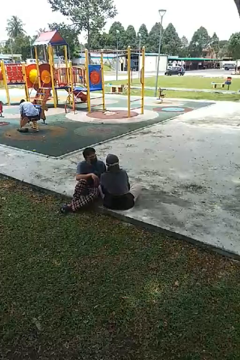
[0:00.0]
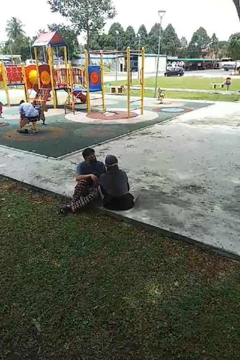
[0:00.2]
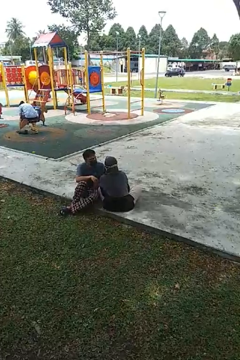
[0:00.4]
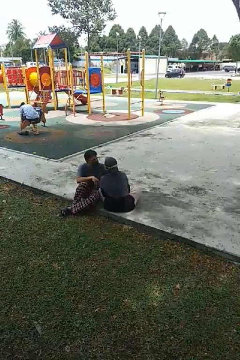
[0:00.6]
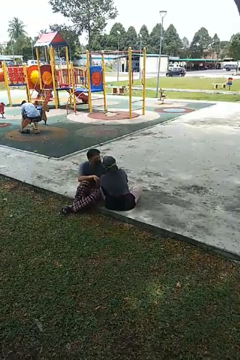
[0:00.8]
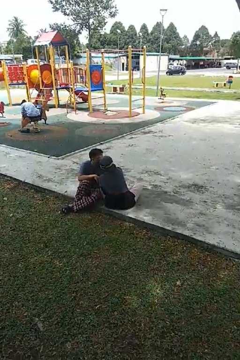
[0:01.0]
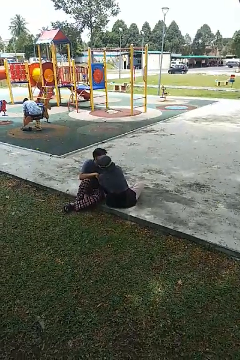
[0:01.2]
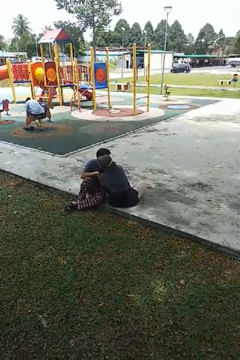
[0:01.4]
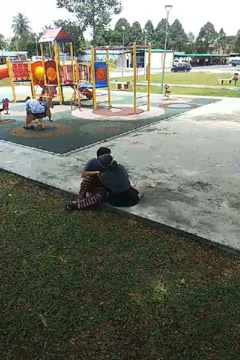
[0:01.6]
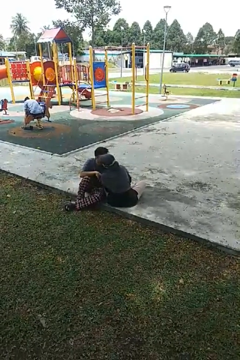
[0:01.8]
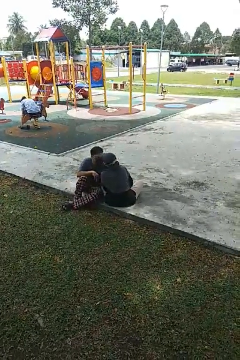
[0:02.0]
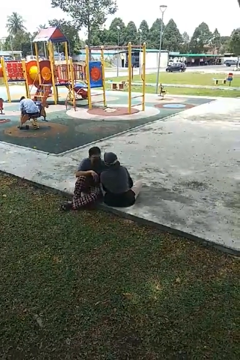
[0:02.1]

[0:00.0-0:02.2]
person kisses cheek of person

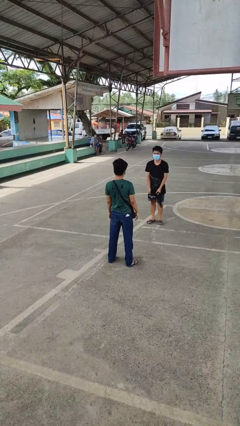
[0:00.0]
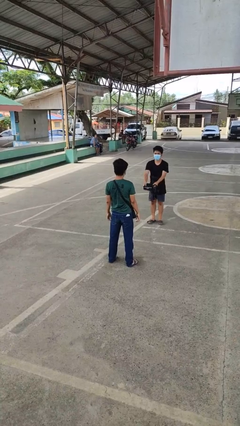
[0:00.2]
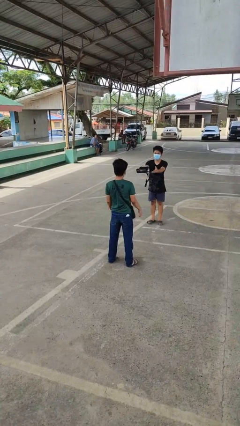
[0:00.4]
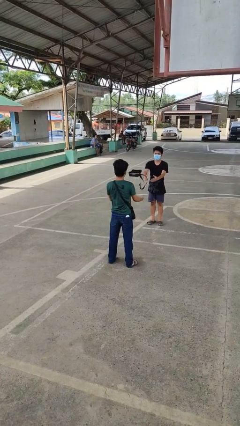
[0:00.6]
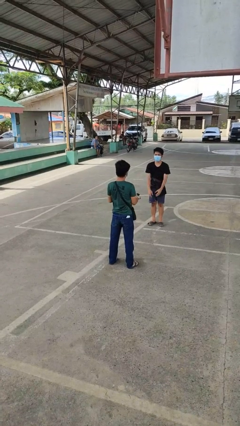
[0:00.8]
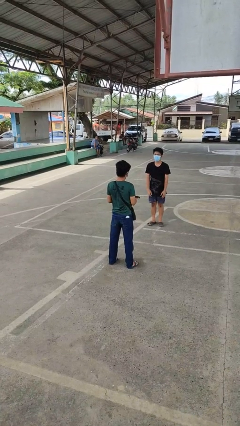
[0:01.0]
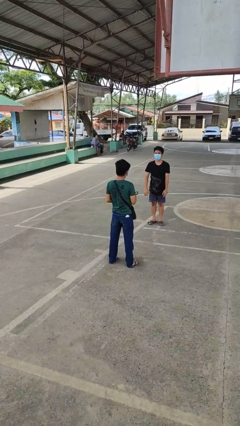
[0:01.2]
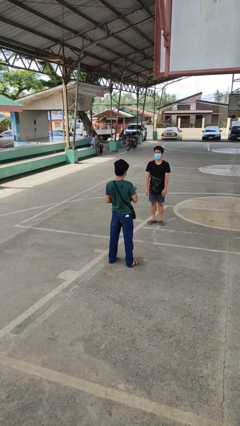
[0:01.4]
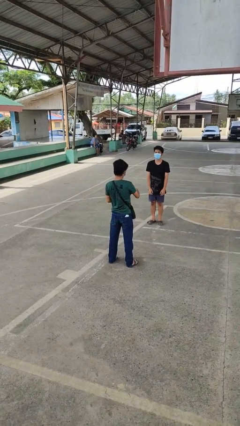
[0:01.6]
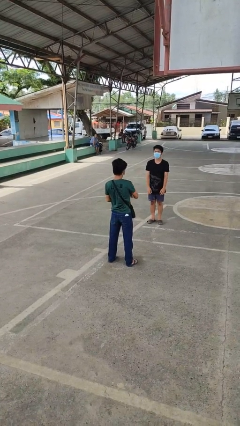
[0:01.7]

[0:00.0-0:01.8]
person catches object from person

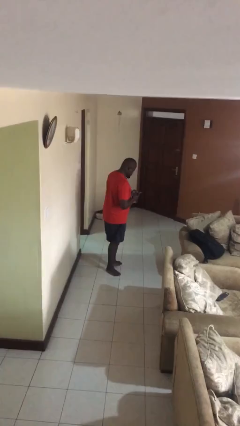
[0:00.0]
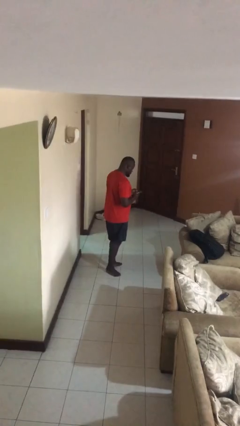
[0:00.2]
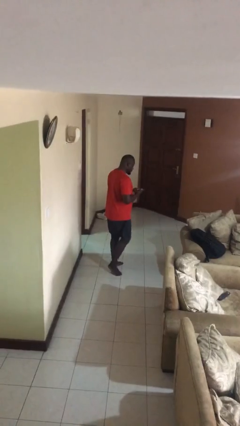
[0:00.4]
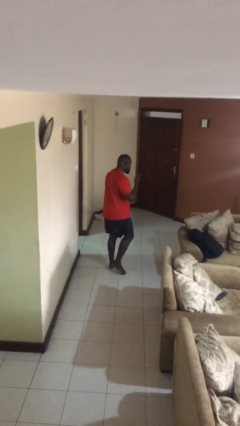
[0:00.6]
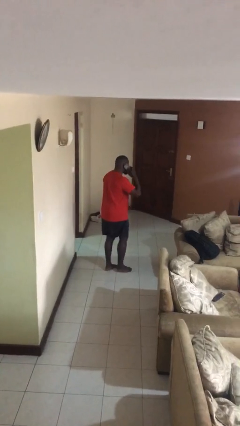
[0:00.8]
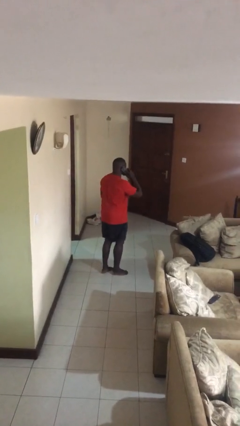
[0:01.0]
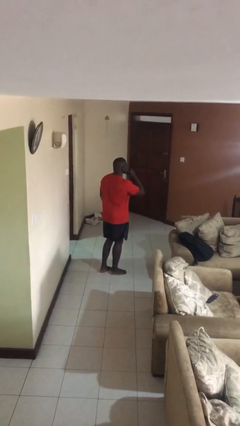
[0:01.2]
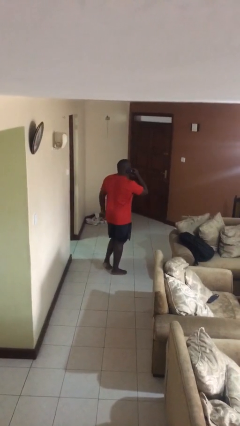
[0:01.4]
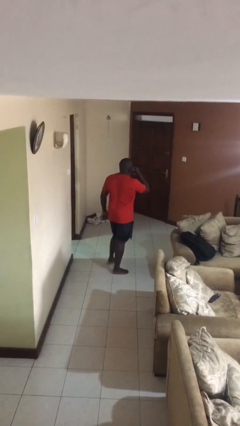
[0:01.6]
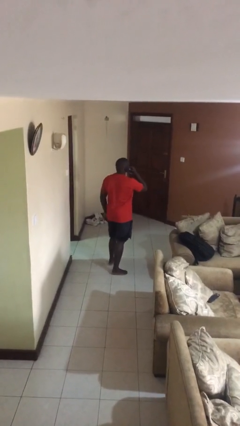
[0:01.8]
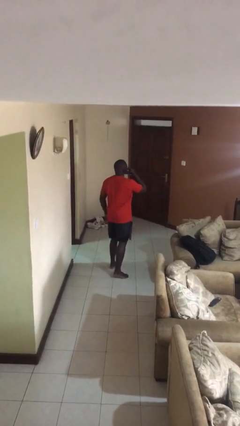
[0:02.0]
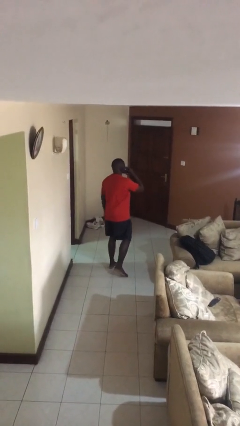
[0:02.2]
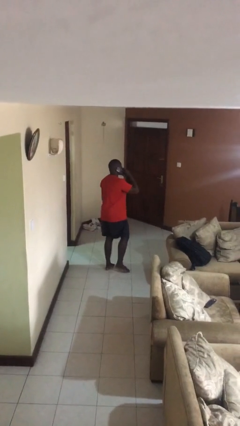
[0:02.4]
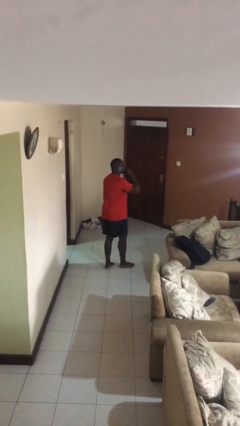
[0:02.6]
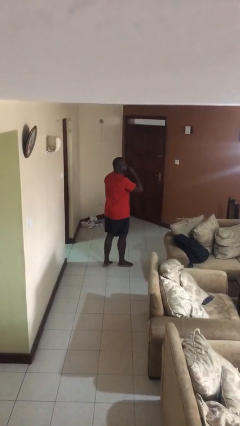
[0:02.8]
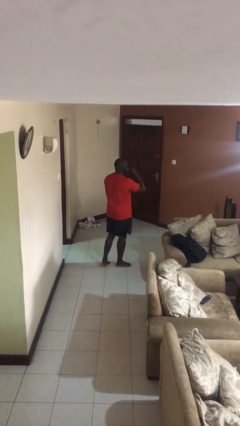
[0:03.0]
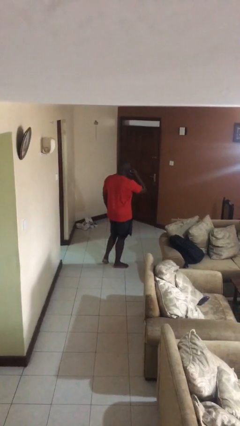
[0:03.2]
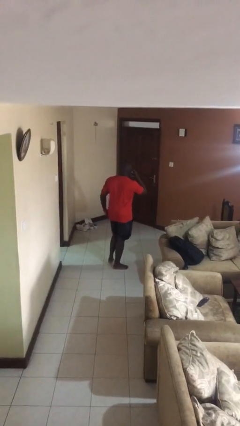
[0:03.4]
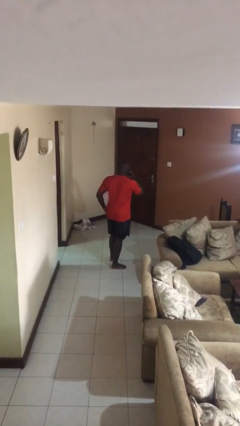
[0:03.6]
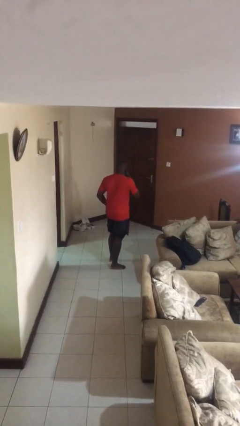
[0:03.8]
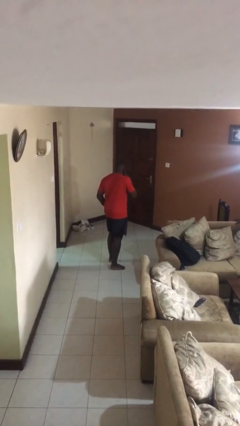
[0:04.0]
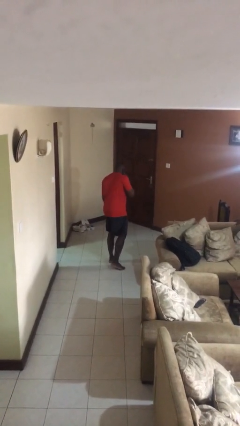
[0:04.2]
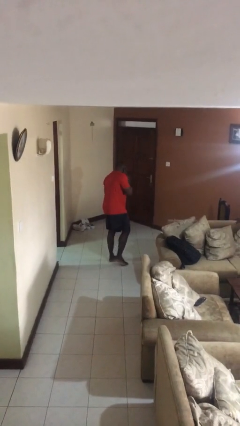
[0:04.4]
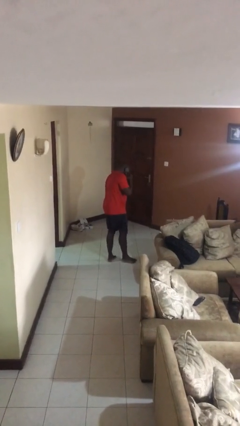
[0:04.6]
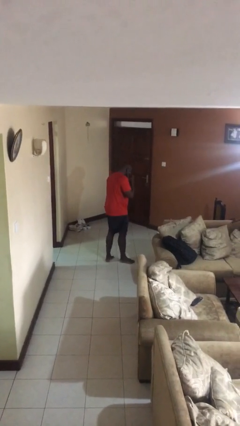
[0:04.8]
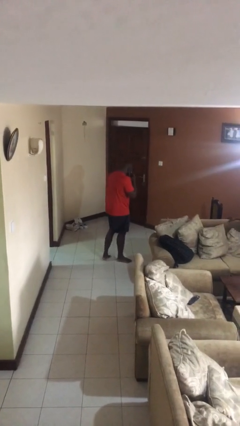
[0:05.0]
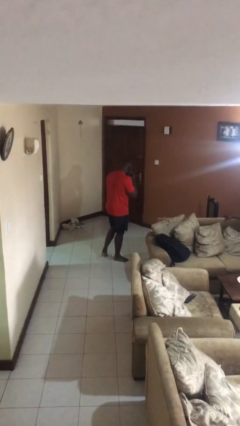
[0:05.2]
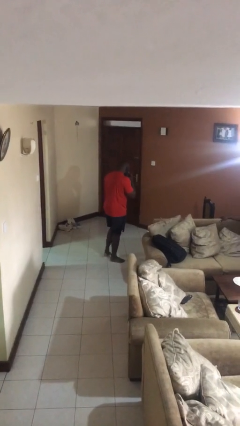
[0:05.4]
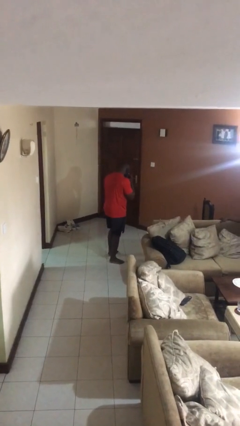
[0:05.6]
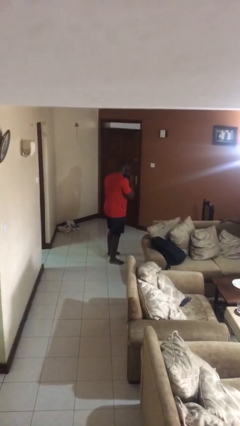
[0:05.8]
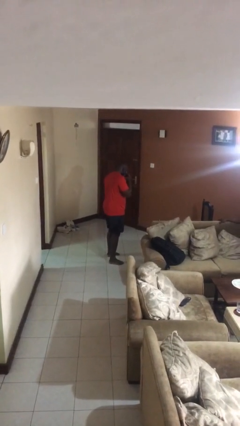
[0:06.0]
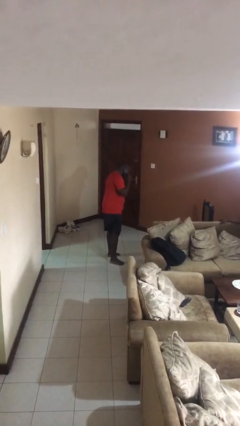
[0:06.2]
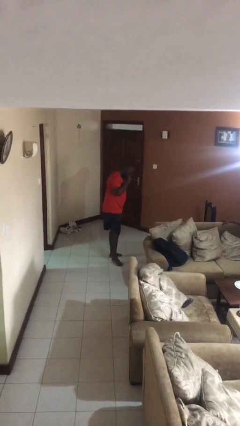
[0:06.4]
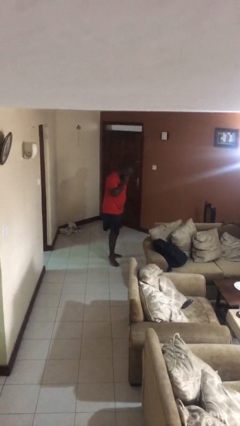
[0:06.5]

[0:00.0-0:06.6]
person talks on phone

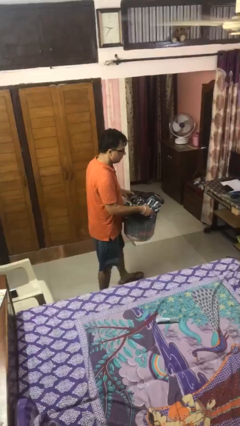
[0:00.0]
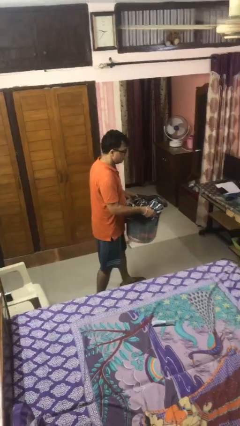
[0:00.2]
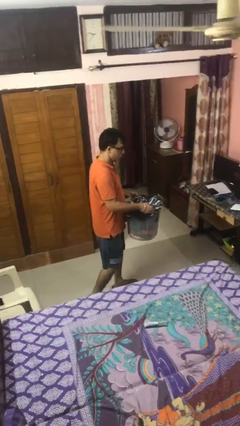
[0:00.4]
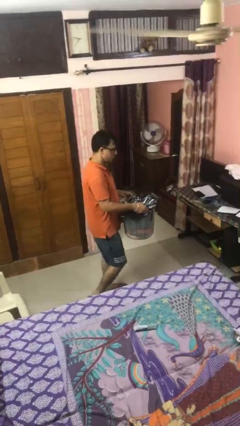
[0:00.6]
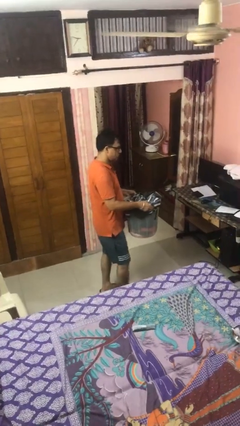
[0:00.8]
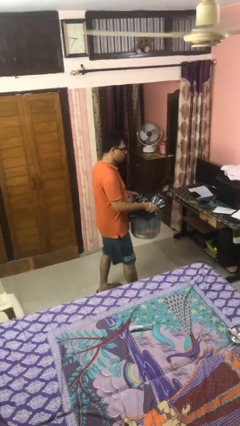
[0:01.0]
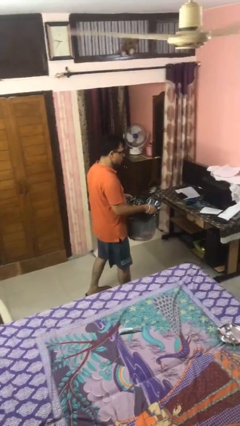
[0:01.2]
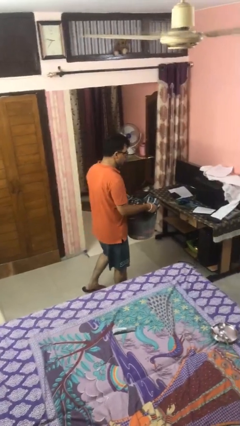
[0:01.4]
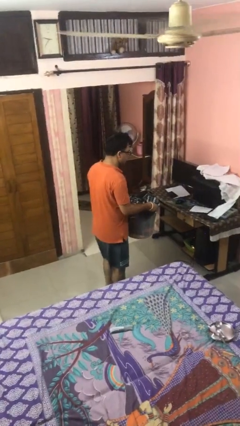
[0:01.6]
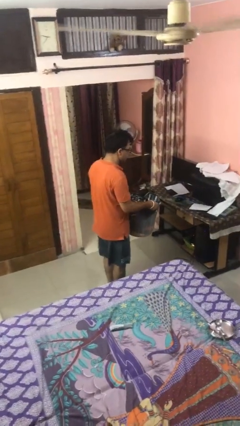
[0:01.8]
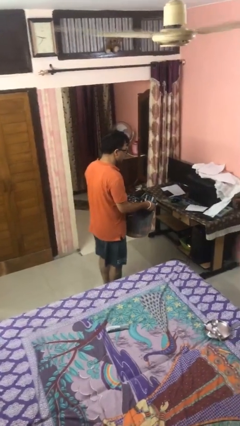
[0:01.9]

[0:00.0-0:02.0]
person carries laundry basket

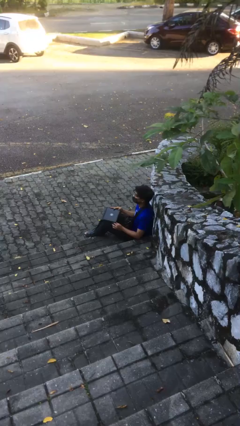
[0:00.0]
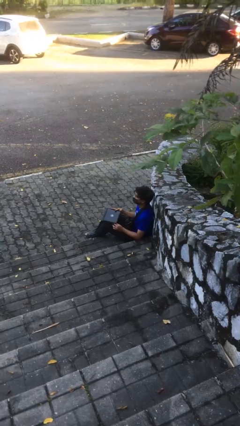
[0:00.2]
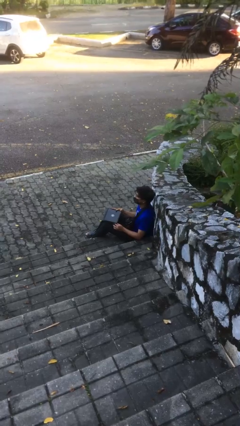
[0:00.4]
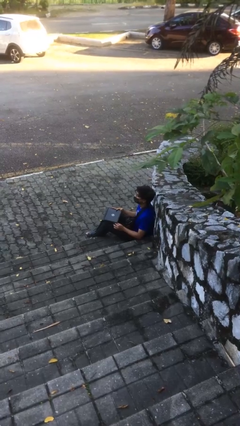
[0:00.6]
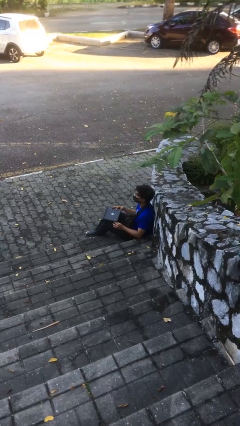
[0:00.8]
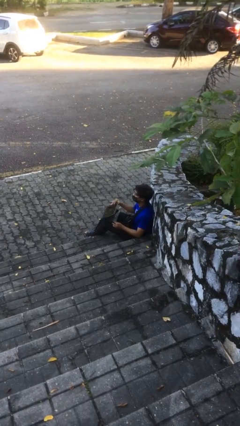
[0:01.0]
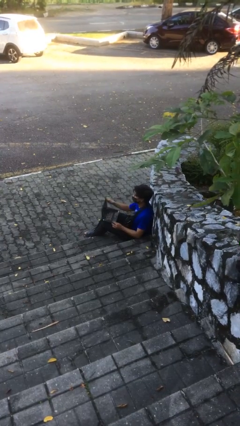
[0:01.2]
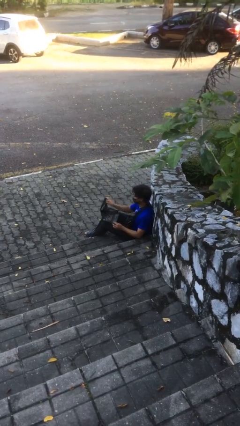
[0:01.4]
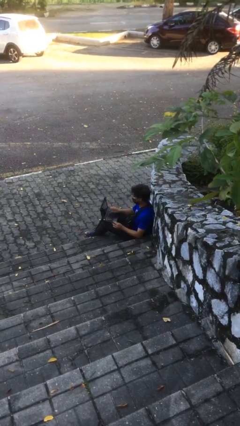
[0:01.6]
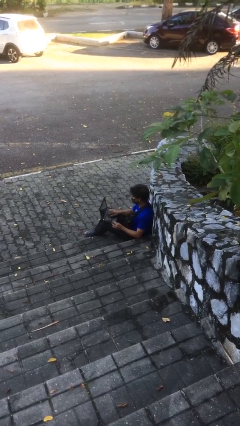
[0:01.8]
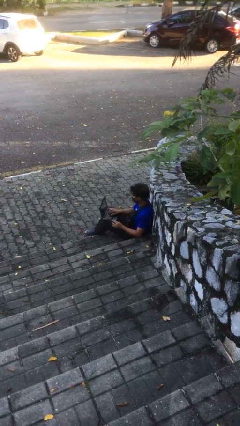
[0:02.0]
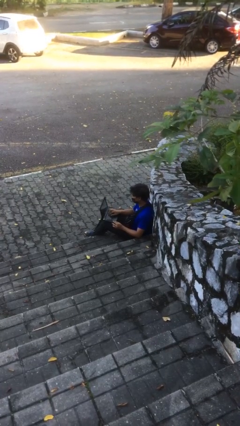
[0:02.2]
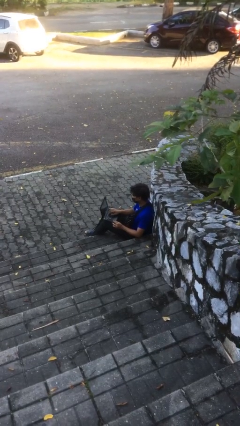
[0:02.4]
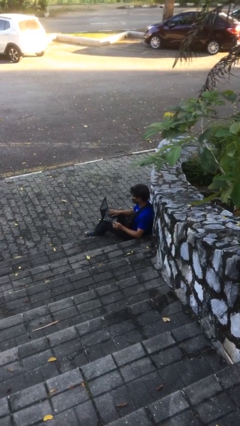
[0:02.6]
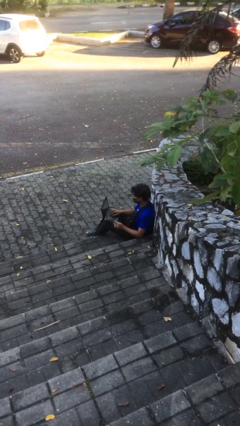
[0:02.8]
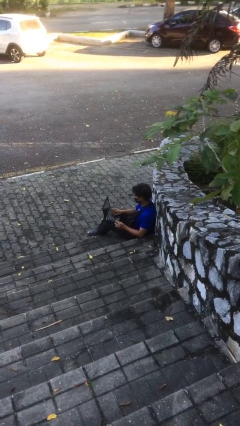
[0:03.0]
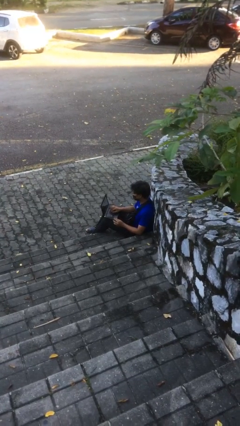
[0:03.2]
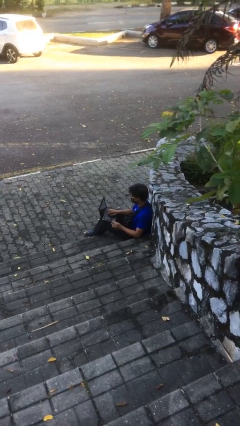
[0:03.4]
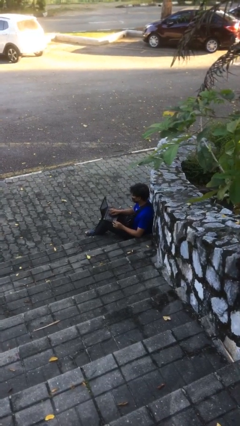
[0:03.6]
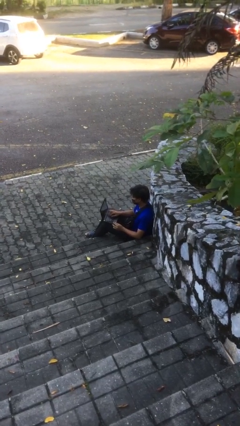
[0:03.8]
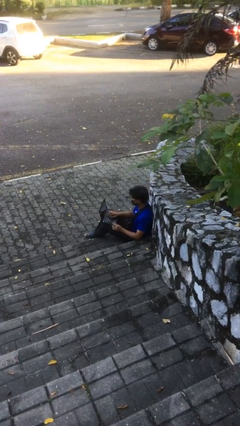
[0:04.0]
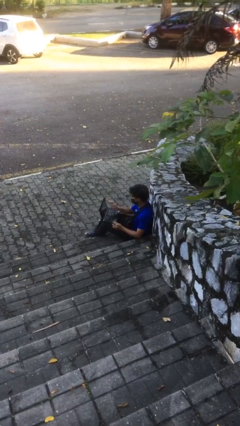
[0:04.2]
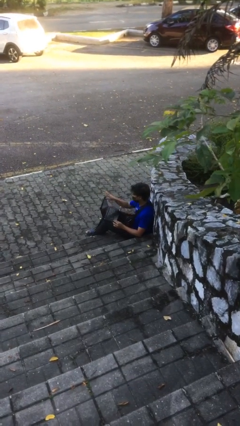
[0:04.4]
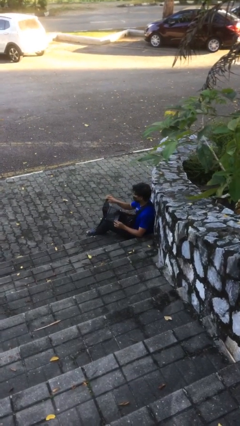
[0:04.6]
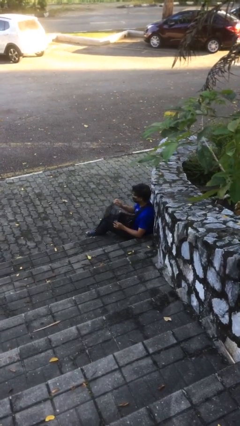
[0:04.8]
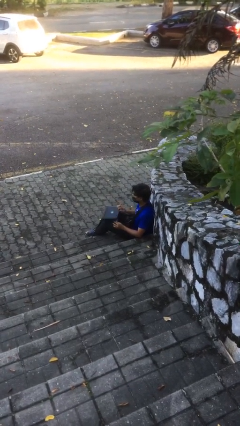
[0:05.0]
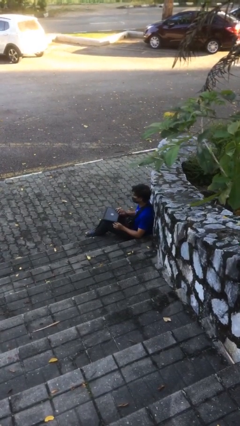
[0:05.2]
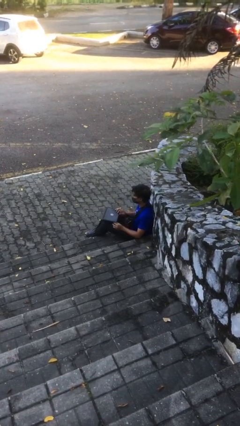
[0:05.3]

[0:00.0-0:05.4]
person interacts with laptop
